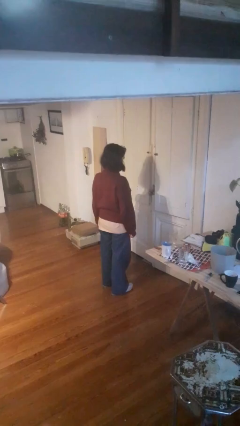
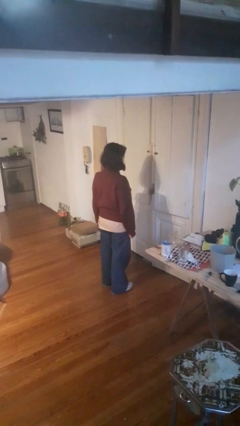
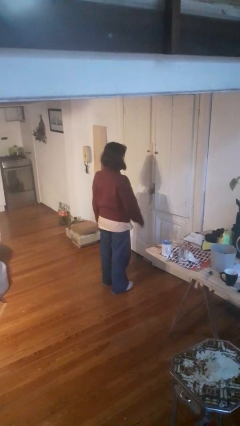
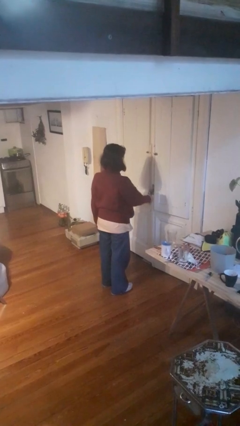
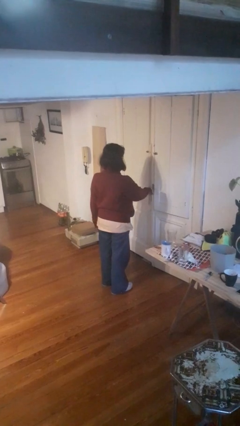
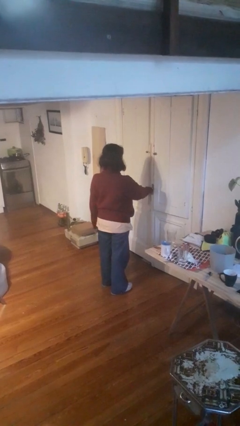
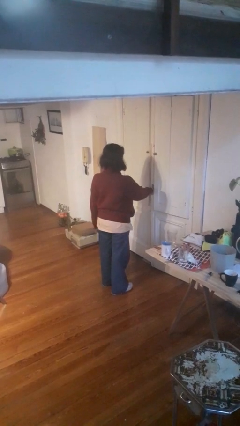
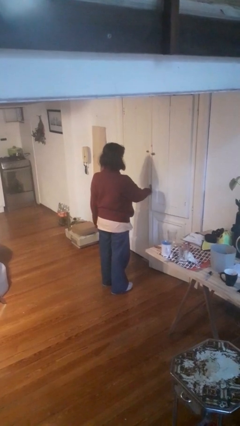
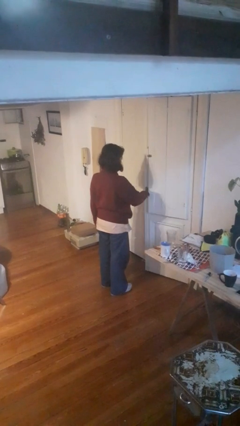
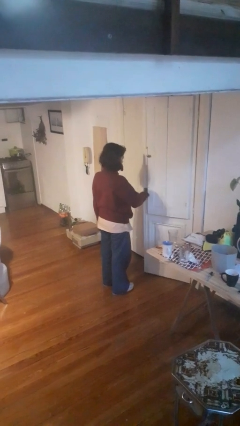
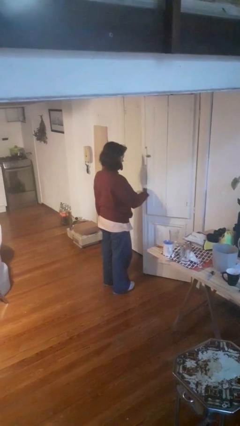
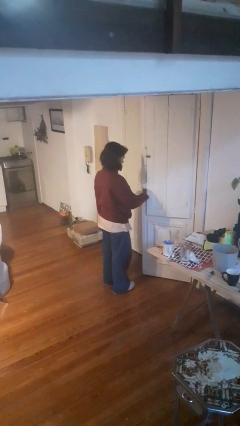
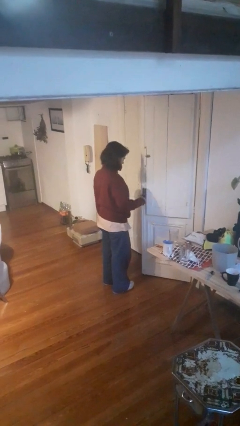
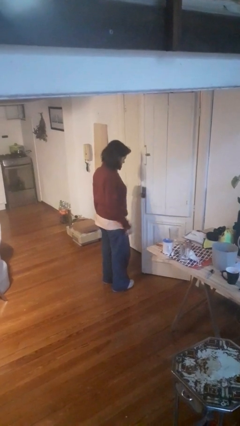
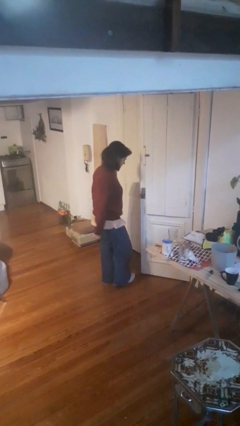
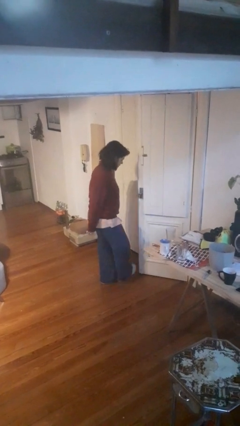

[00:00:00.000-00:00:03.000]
person opens facility door

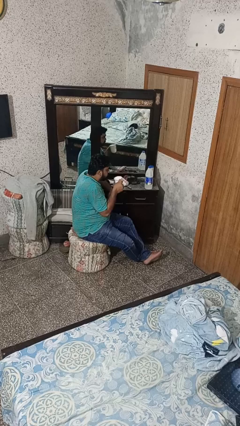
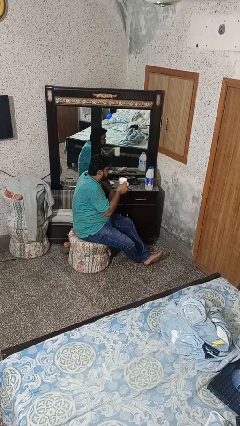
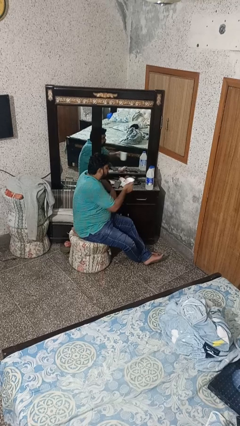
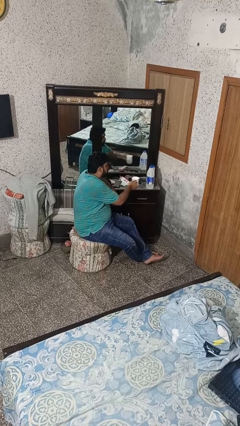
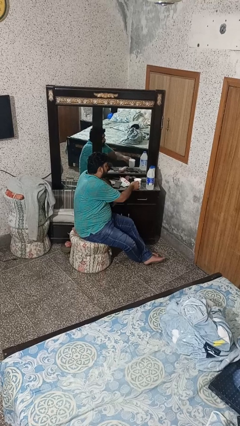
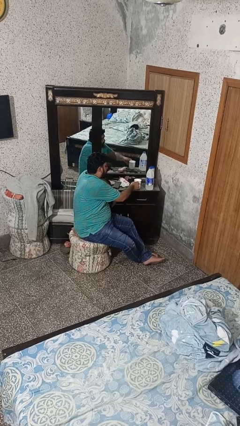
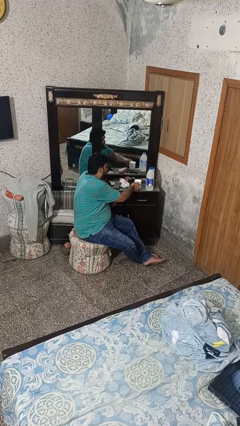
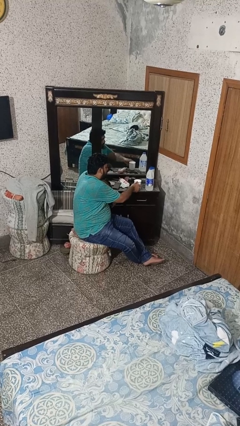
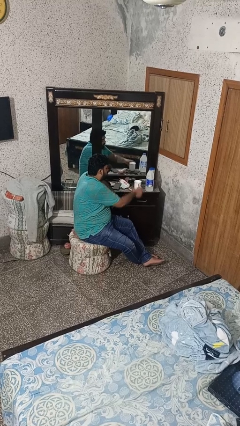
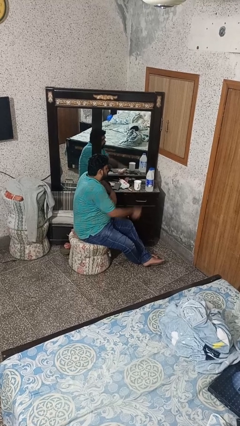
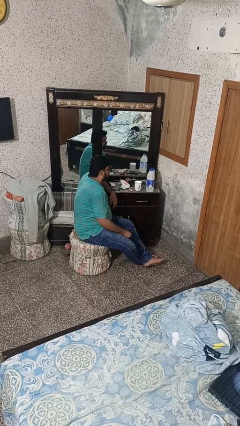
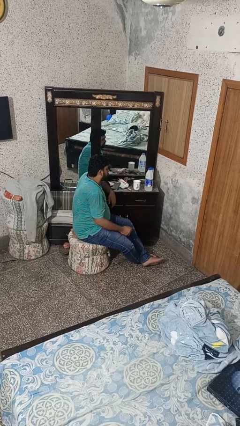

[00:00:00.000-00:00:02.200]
person puts down object on table

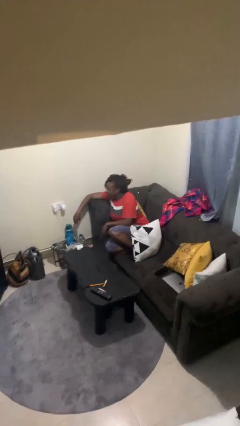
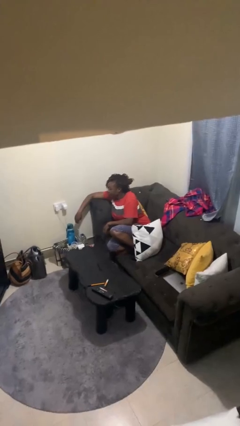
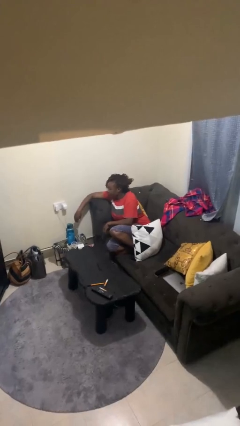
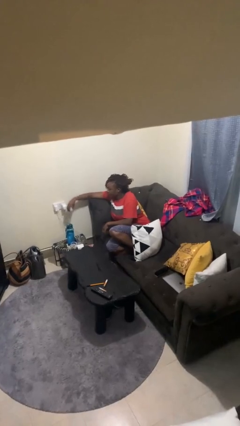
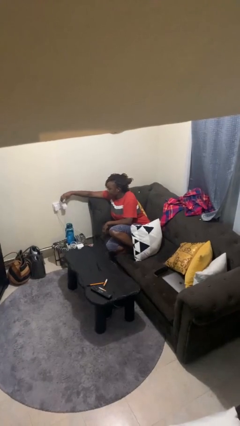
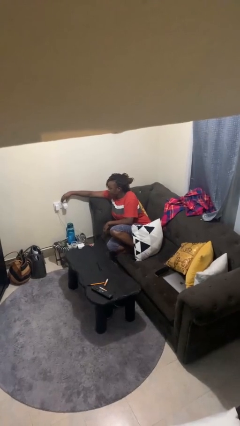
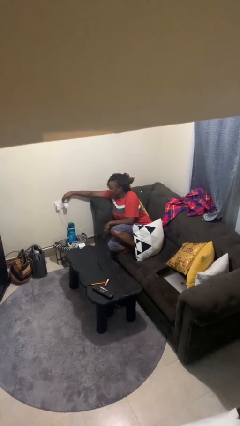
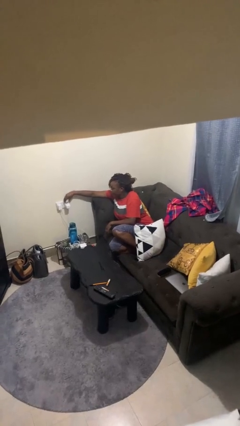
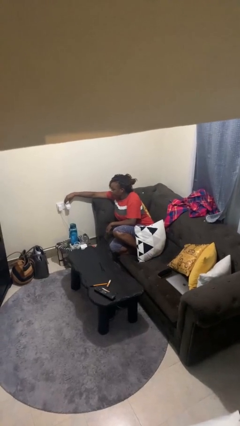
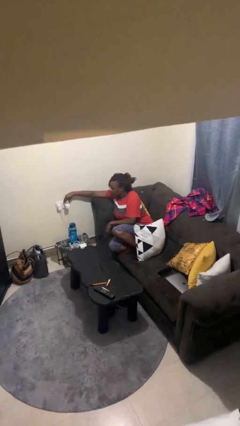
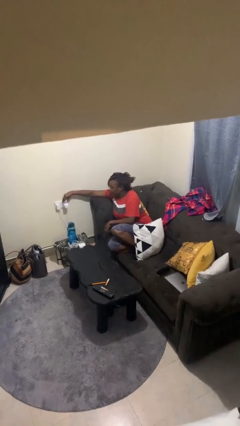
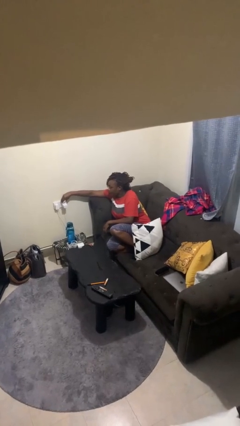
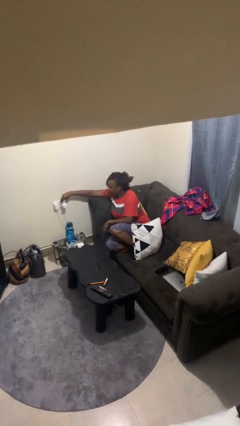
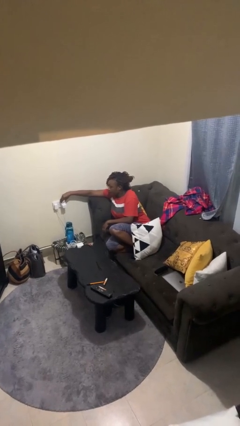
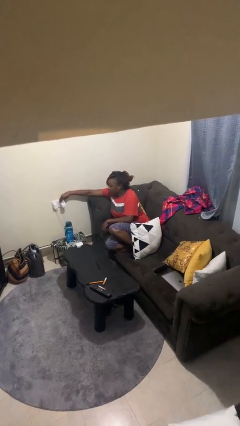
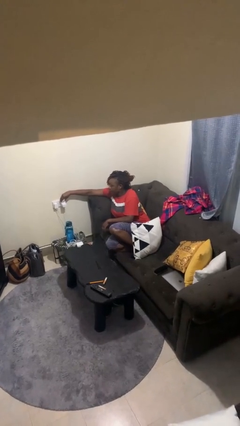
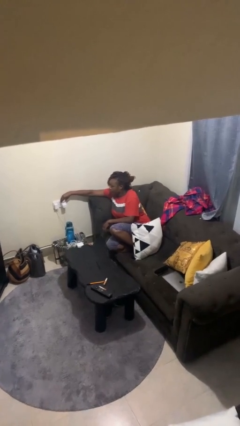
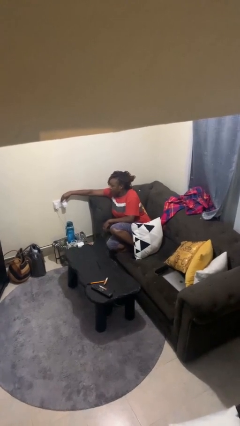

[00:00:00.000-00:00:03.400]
person plugs into electrical socket

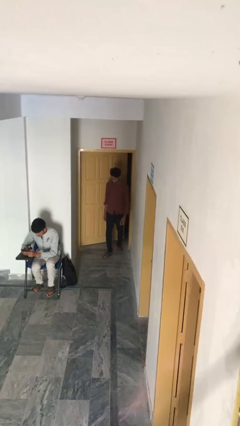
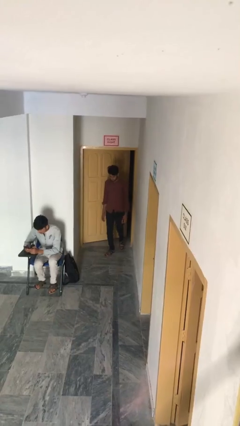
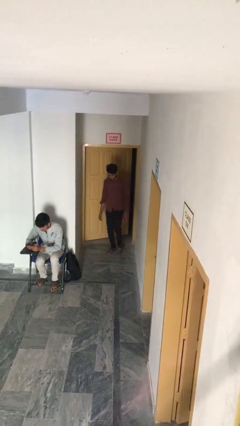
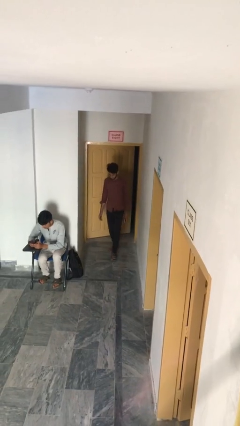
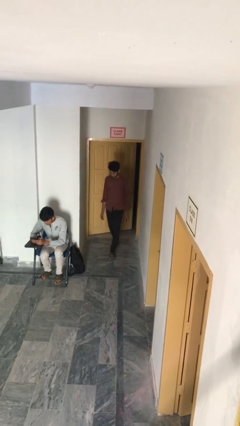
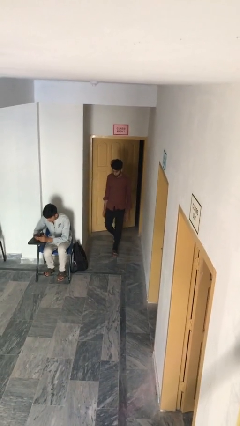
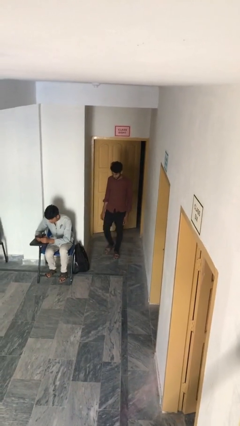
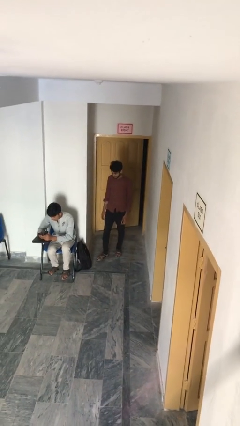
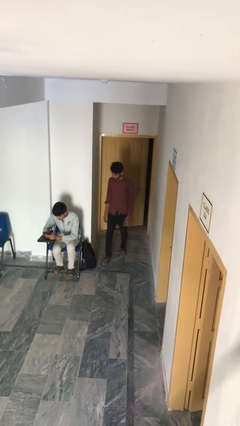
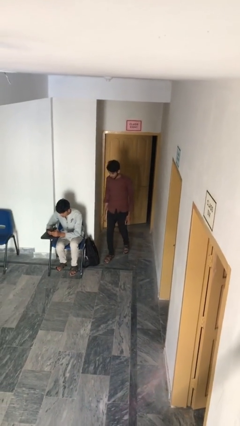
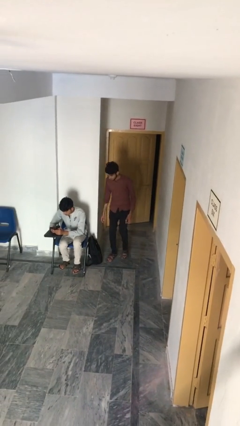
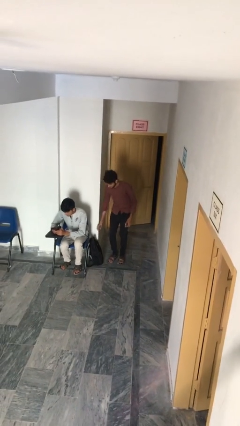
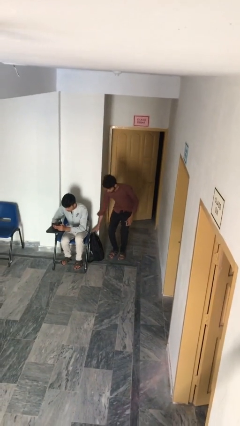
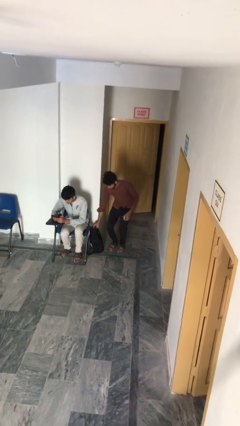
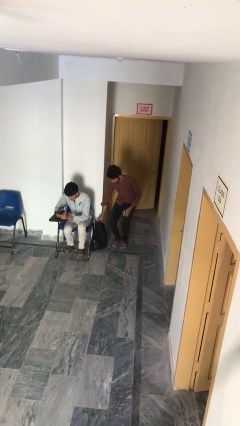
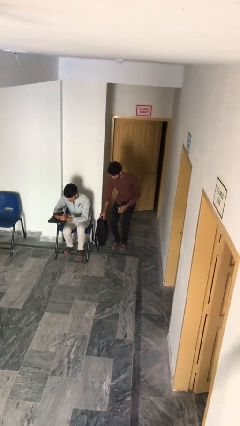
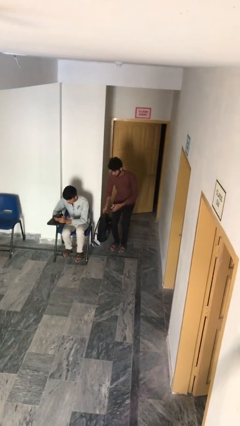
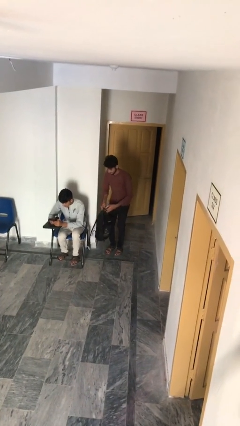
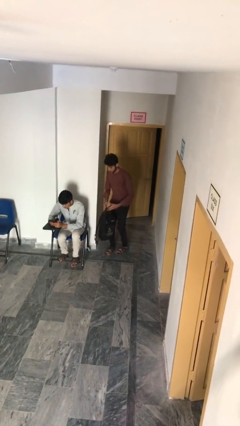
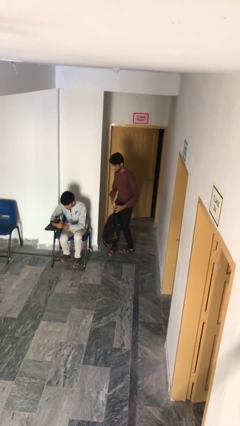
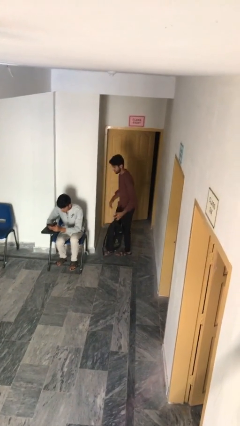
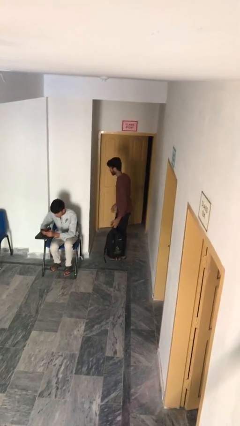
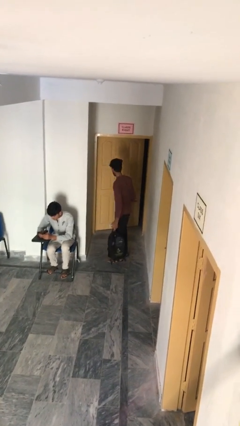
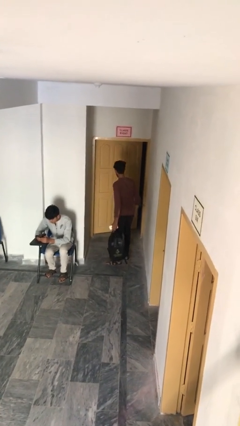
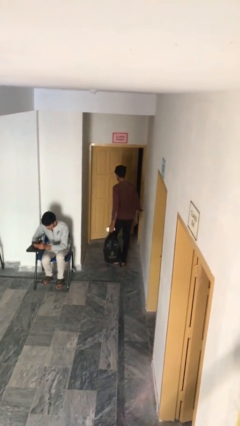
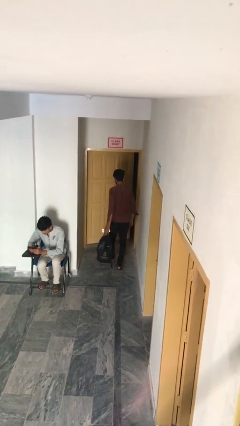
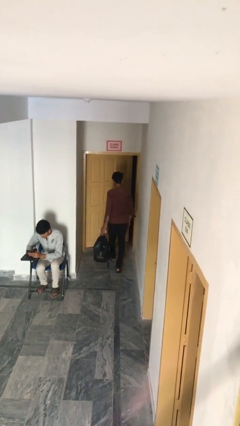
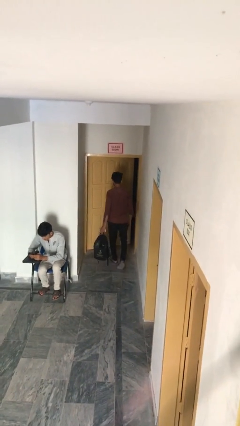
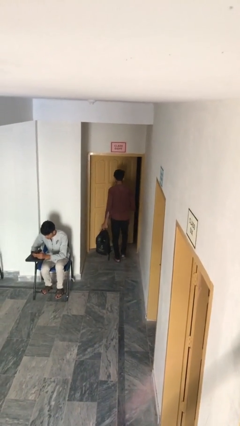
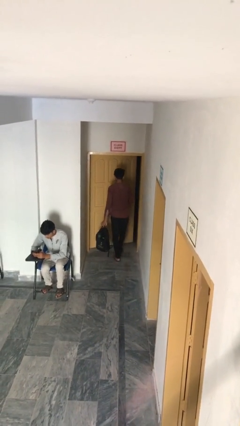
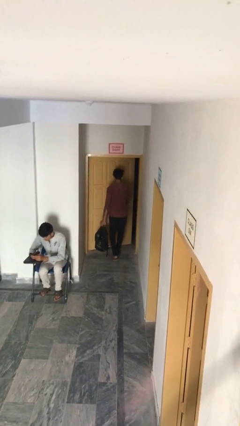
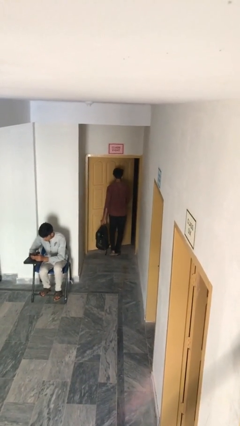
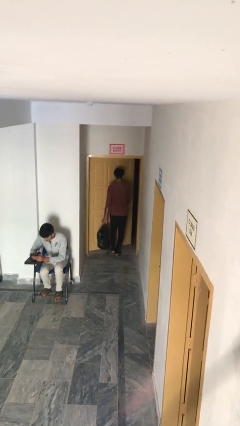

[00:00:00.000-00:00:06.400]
person steals object from person

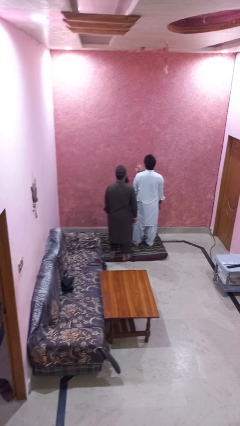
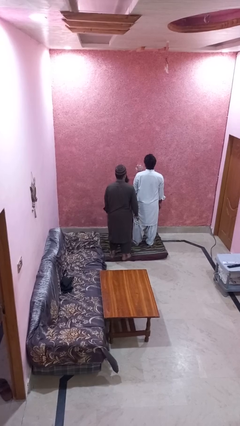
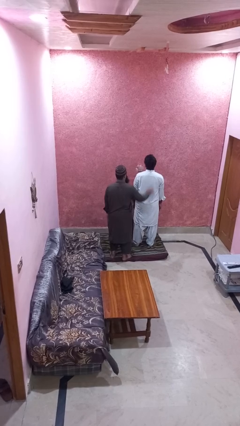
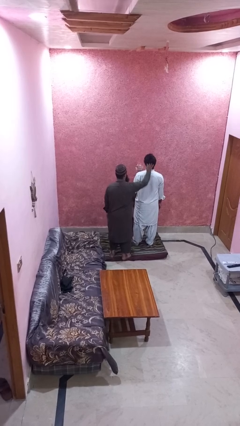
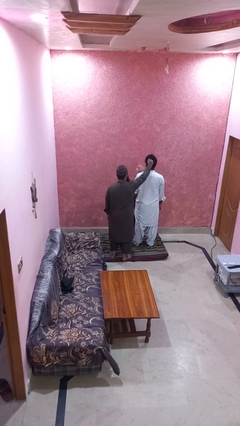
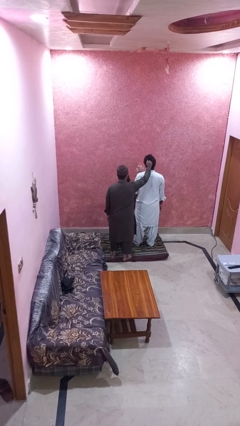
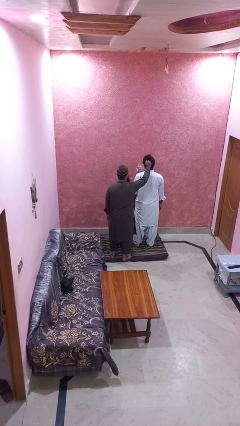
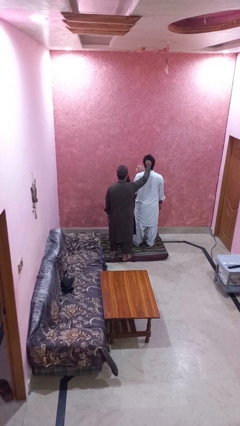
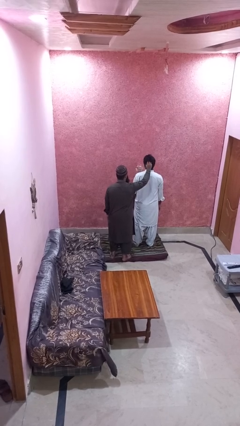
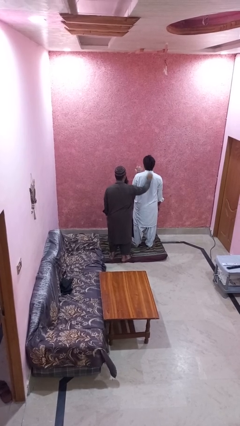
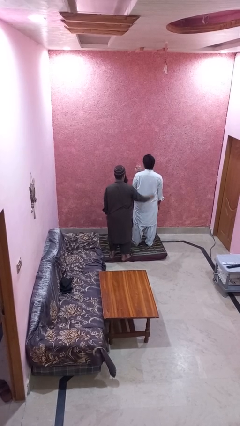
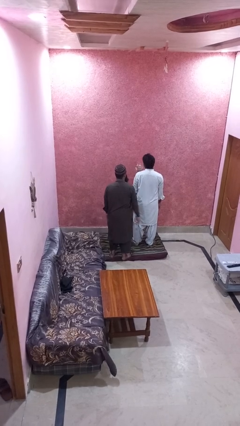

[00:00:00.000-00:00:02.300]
person grabs person by hair

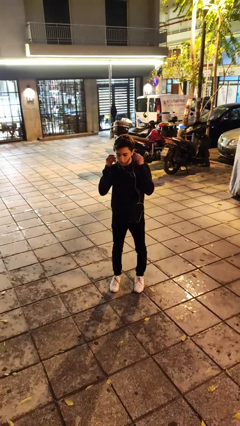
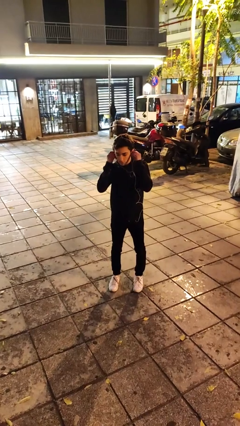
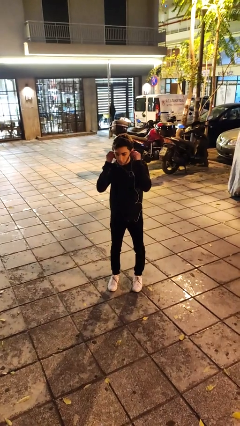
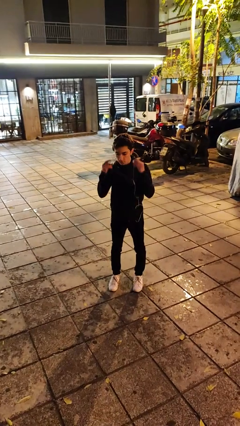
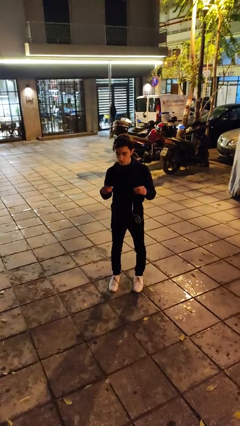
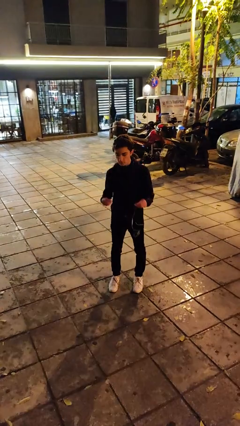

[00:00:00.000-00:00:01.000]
person takes off headphones
